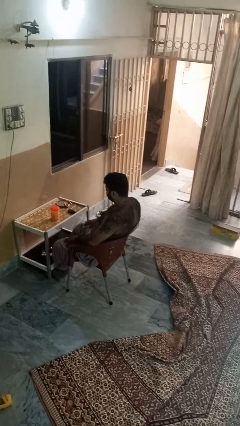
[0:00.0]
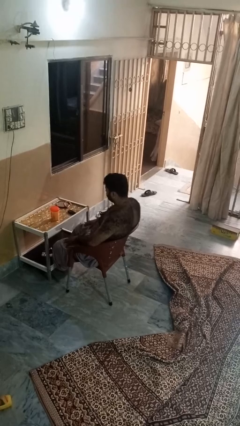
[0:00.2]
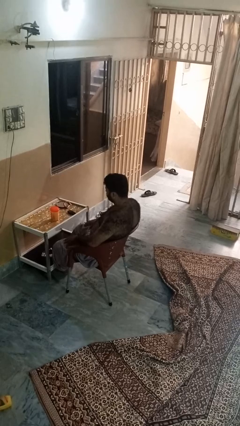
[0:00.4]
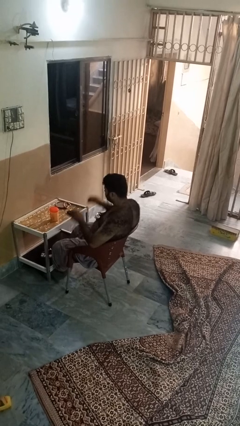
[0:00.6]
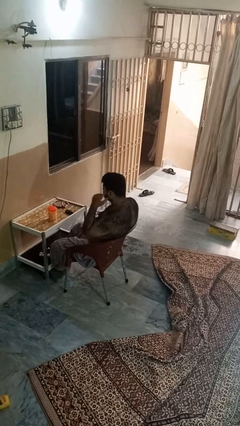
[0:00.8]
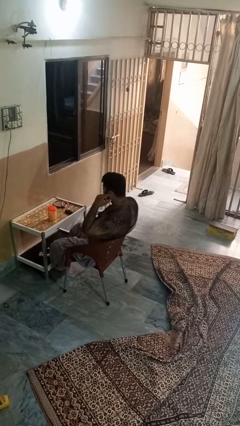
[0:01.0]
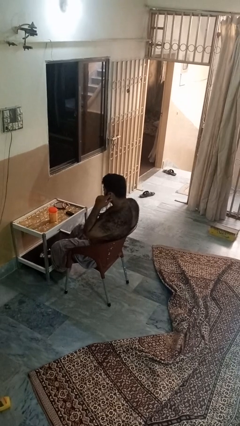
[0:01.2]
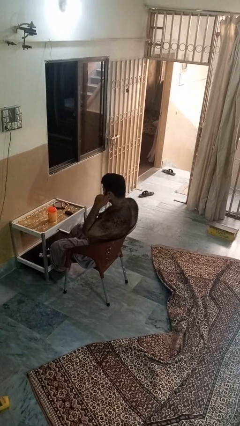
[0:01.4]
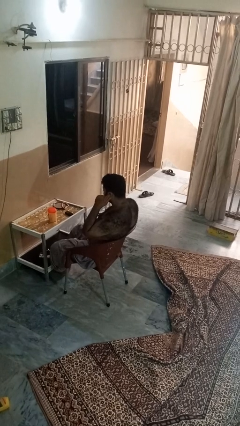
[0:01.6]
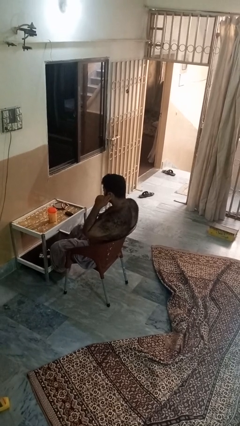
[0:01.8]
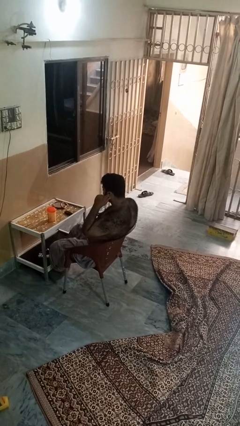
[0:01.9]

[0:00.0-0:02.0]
person puts fingers in ear

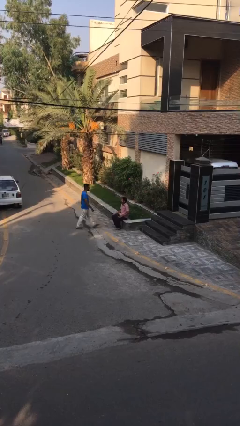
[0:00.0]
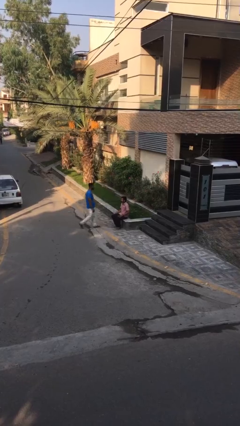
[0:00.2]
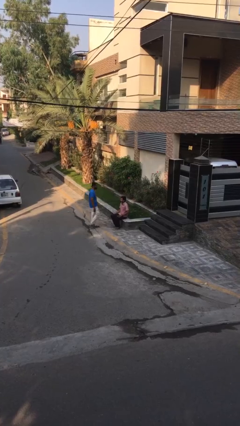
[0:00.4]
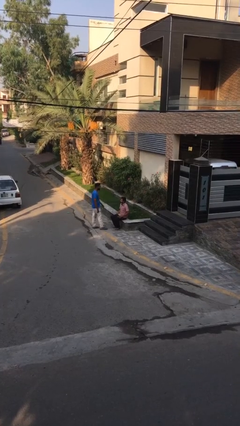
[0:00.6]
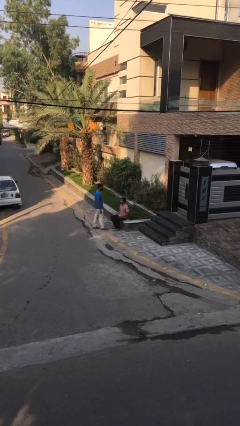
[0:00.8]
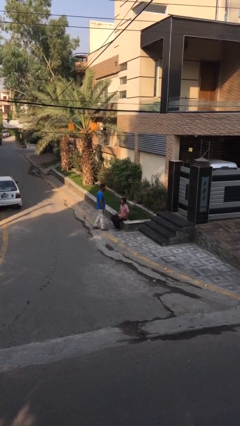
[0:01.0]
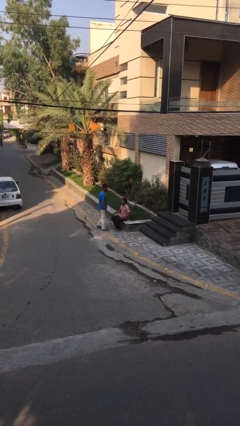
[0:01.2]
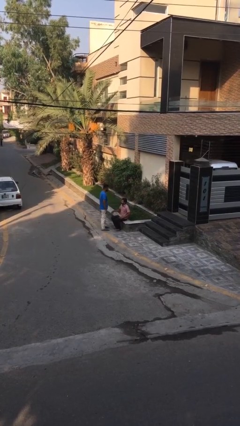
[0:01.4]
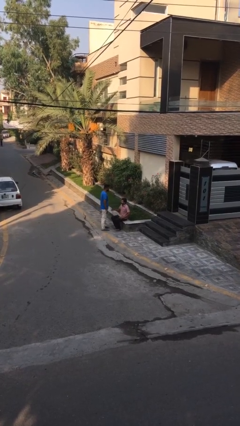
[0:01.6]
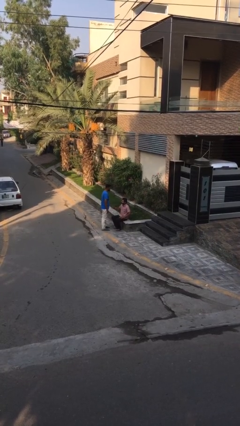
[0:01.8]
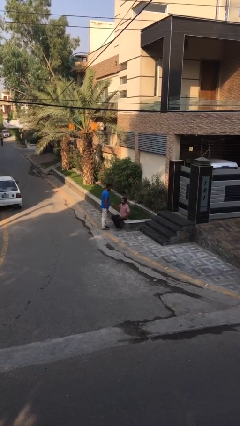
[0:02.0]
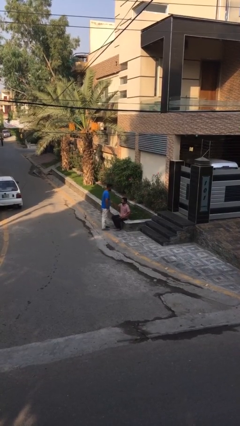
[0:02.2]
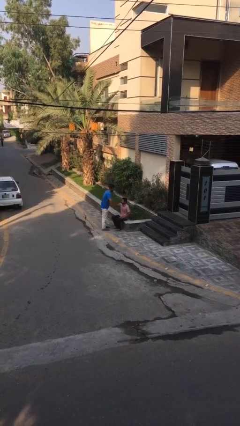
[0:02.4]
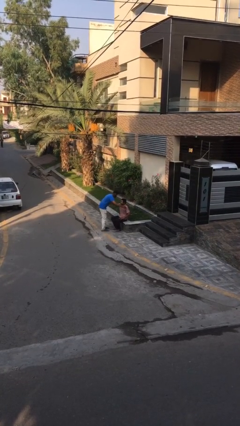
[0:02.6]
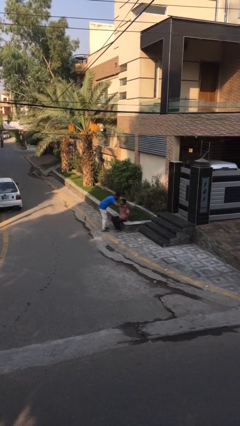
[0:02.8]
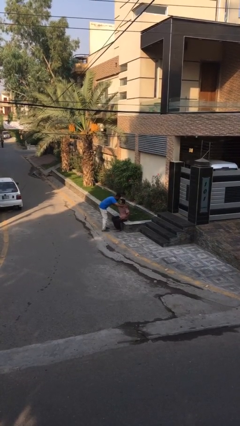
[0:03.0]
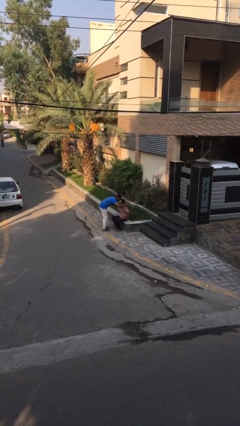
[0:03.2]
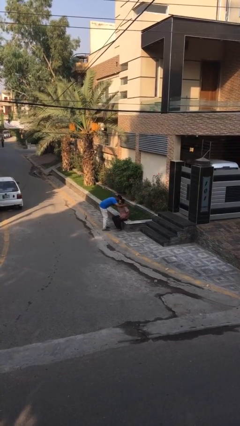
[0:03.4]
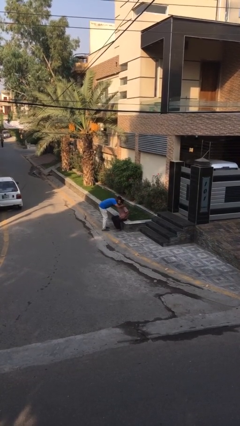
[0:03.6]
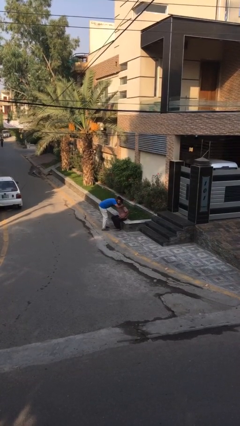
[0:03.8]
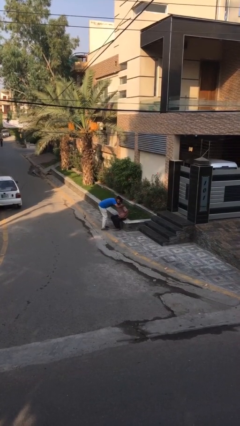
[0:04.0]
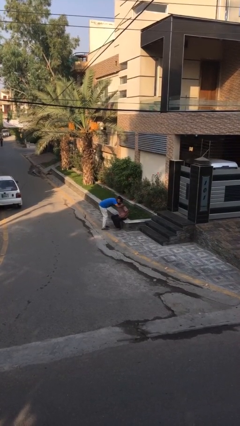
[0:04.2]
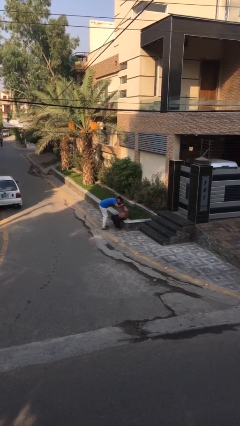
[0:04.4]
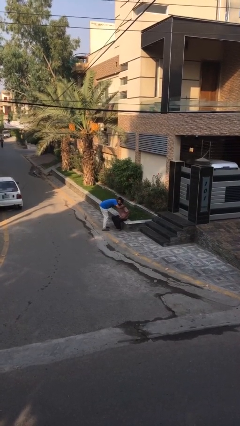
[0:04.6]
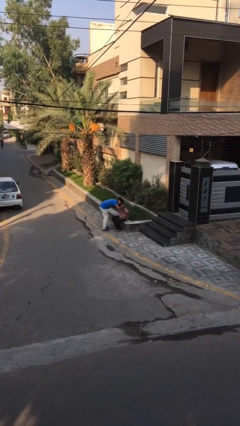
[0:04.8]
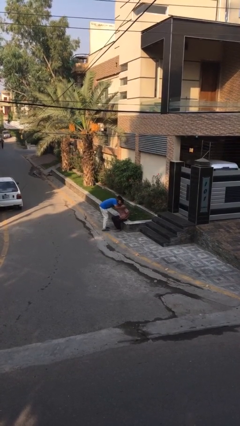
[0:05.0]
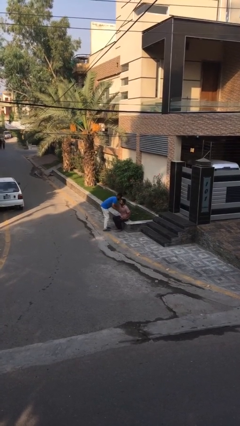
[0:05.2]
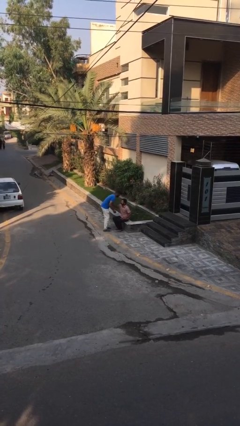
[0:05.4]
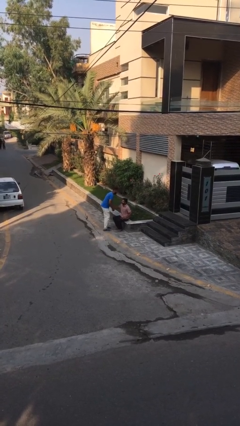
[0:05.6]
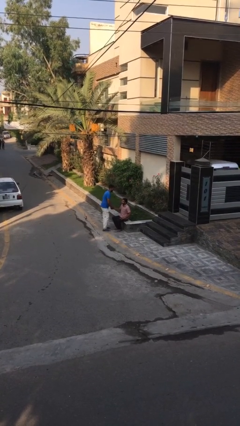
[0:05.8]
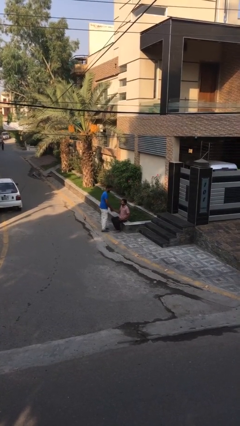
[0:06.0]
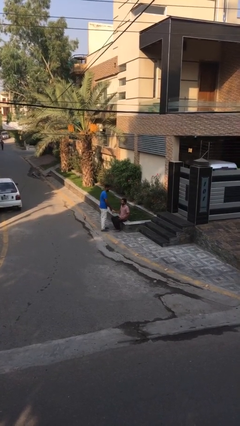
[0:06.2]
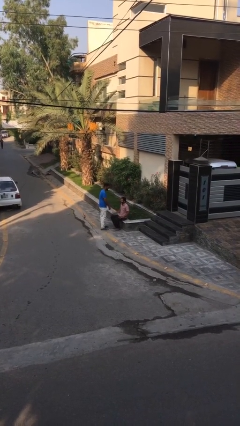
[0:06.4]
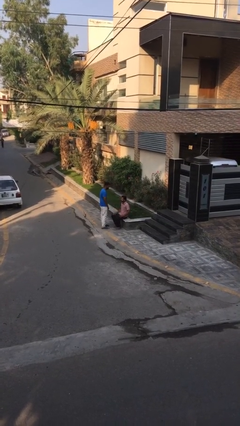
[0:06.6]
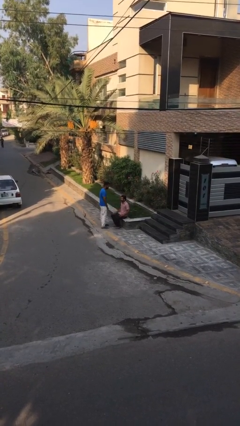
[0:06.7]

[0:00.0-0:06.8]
person embraces person

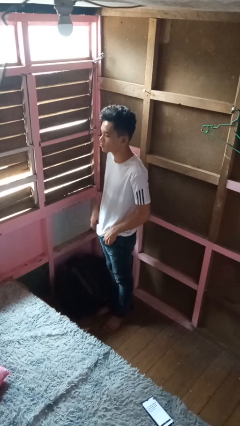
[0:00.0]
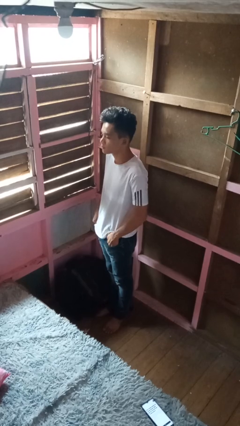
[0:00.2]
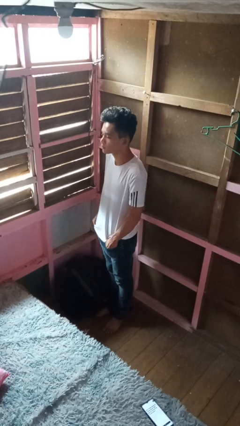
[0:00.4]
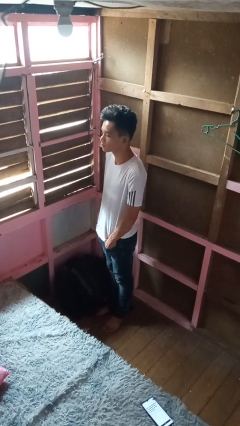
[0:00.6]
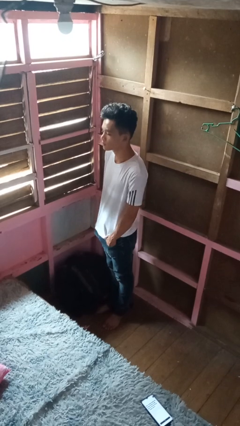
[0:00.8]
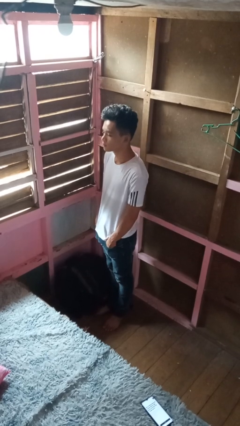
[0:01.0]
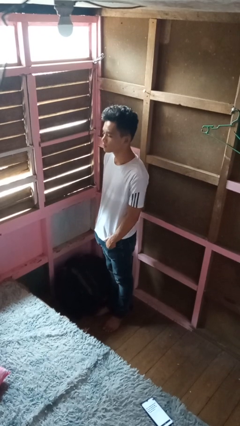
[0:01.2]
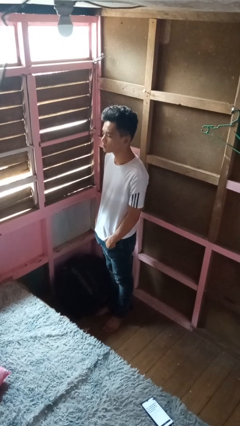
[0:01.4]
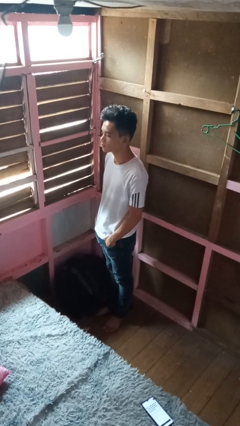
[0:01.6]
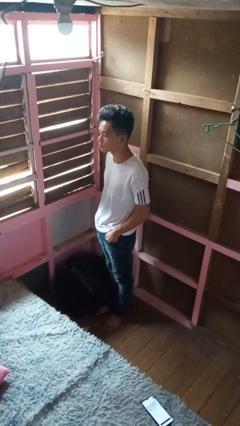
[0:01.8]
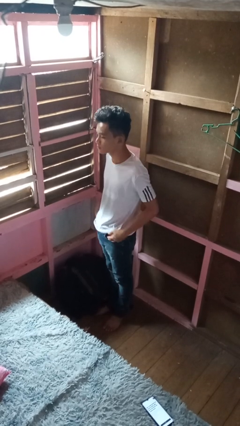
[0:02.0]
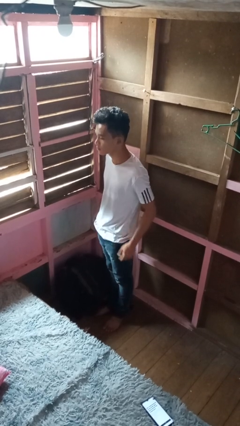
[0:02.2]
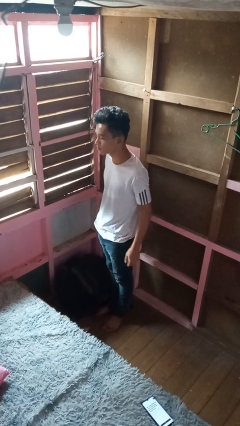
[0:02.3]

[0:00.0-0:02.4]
person puts hands in back pockets

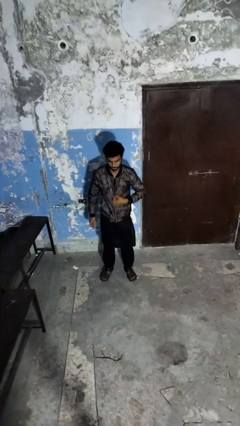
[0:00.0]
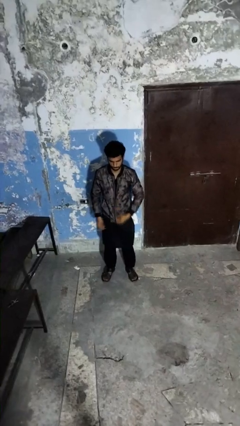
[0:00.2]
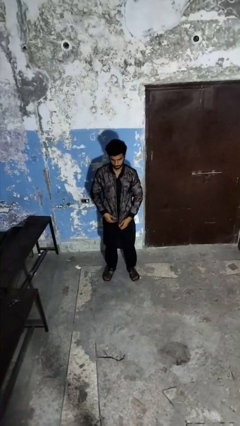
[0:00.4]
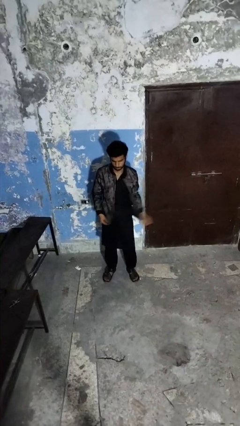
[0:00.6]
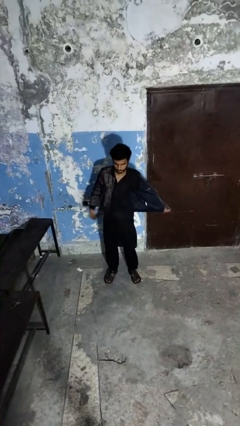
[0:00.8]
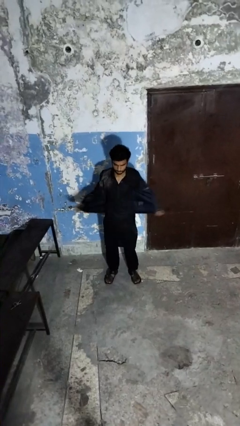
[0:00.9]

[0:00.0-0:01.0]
person unzips jacket

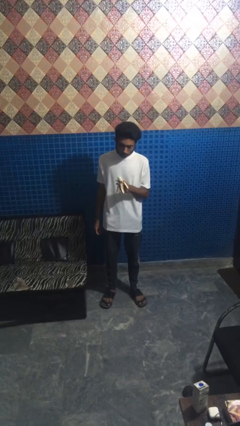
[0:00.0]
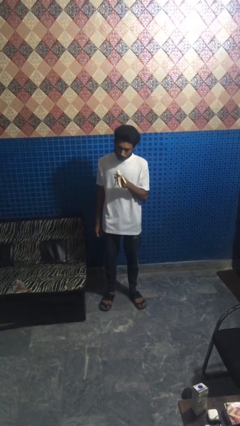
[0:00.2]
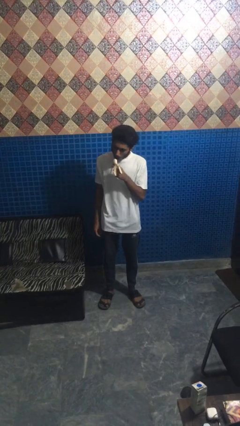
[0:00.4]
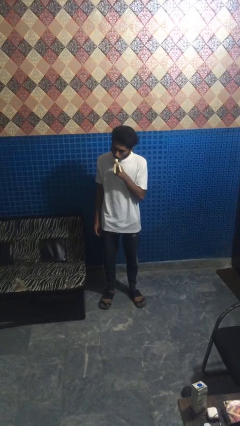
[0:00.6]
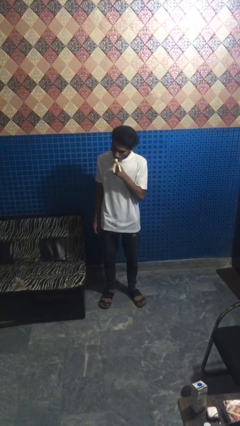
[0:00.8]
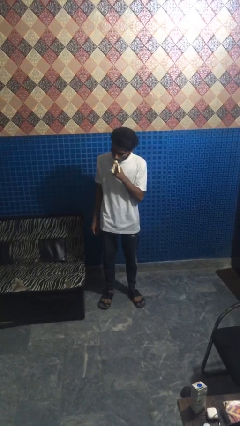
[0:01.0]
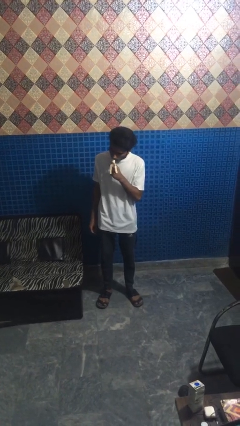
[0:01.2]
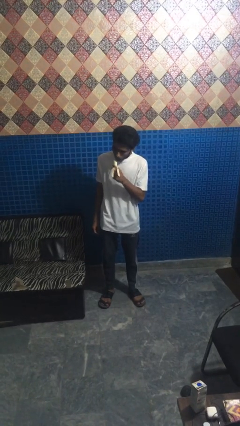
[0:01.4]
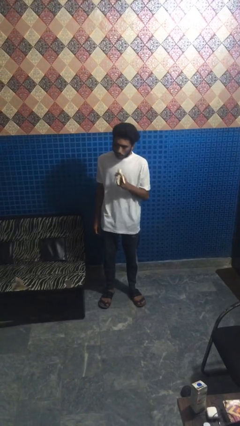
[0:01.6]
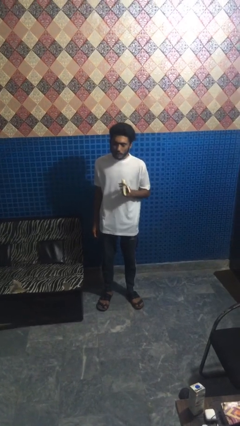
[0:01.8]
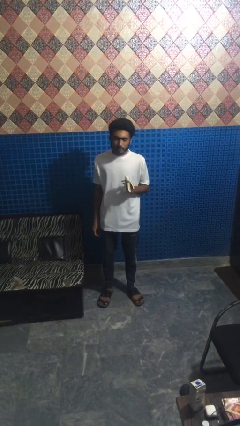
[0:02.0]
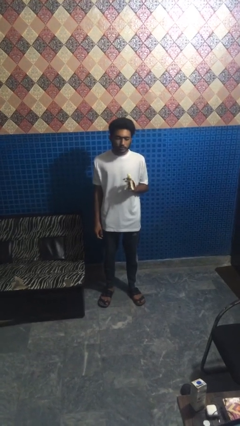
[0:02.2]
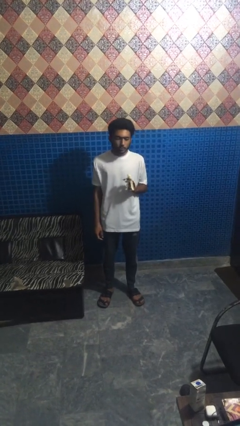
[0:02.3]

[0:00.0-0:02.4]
person eats banana

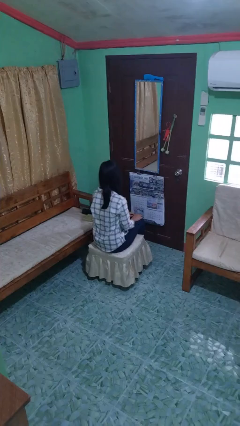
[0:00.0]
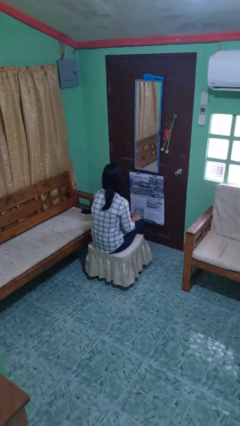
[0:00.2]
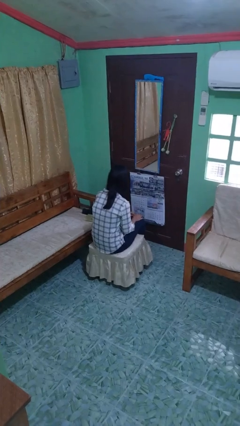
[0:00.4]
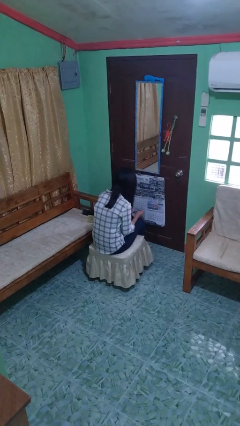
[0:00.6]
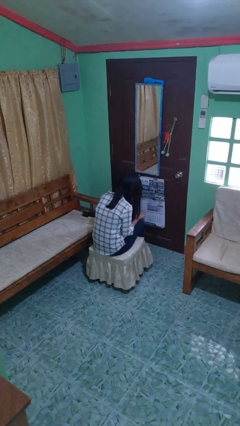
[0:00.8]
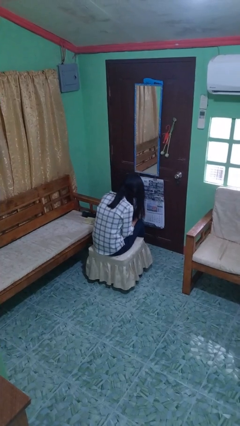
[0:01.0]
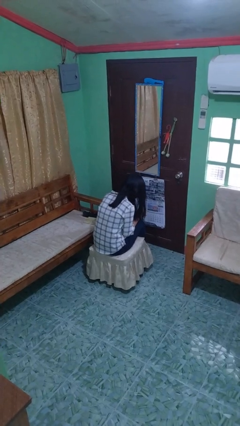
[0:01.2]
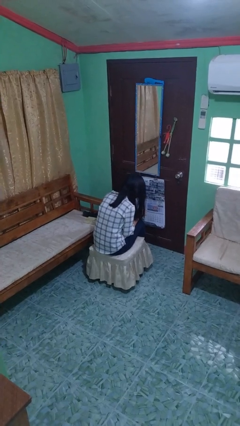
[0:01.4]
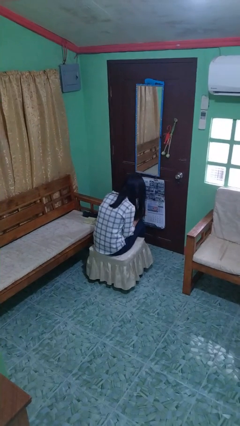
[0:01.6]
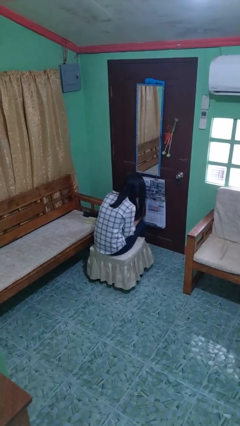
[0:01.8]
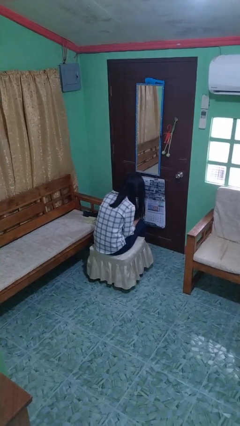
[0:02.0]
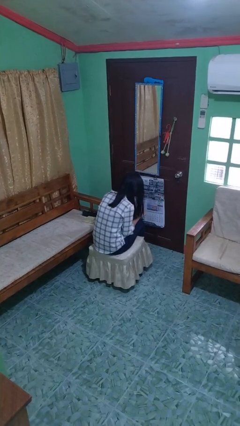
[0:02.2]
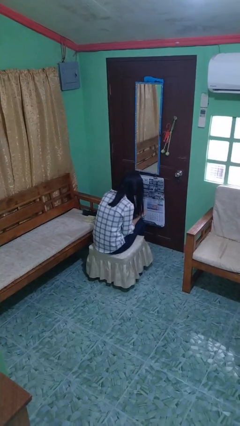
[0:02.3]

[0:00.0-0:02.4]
person looks at hands in lap

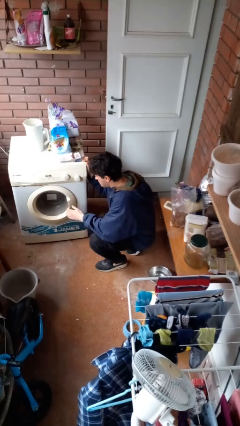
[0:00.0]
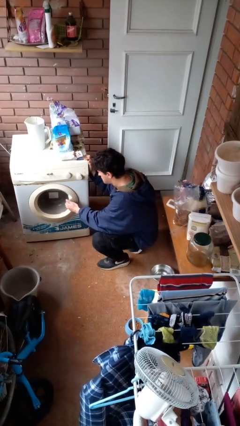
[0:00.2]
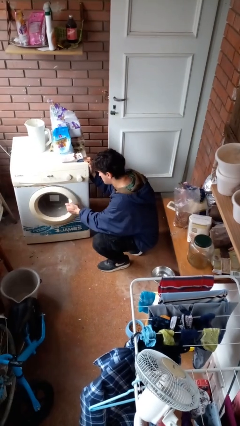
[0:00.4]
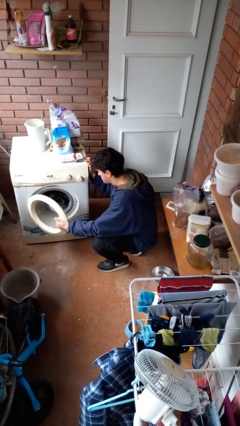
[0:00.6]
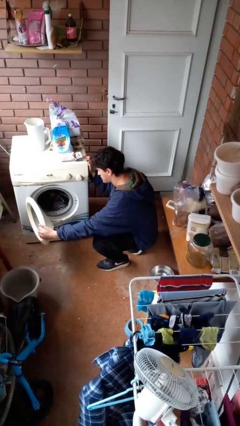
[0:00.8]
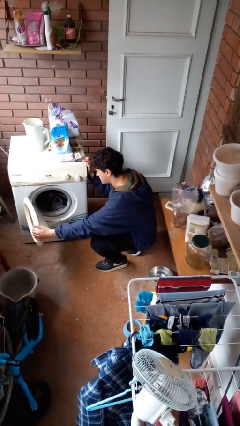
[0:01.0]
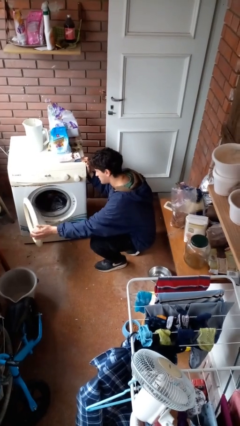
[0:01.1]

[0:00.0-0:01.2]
person opens clothes washer
